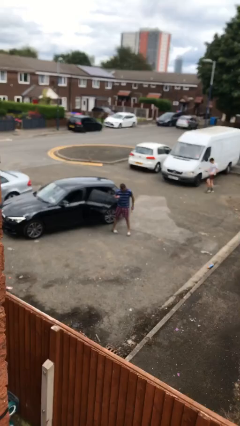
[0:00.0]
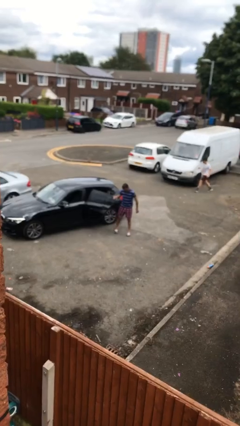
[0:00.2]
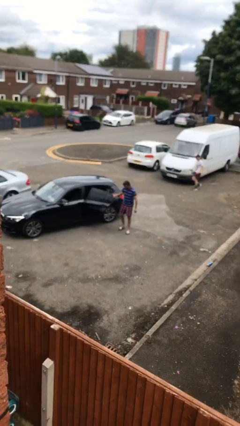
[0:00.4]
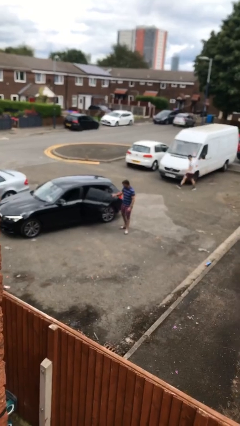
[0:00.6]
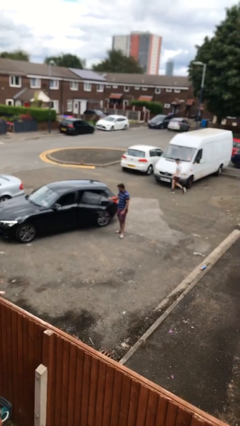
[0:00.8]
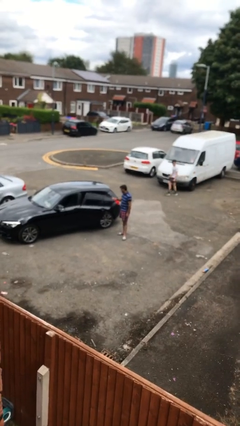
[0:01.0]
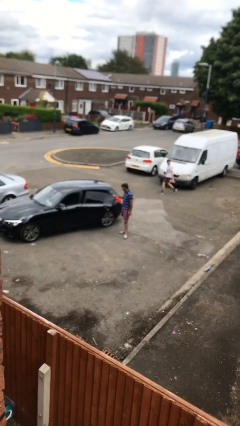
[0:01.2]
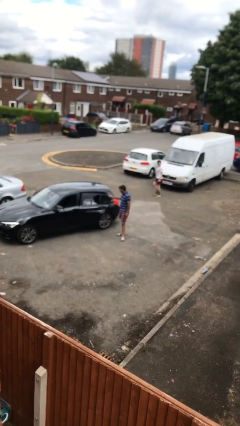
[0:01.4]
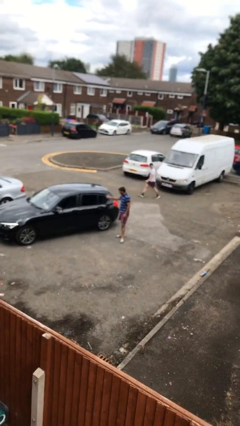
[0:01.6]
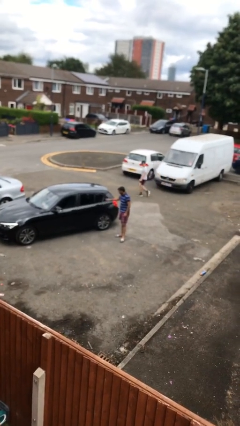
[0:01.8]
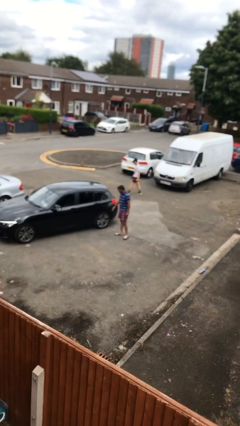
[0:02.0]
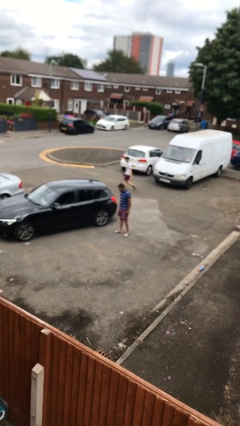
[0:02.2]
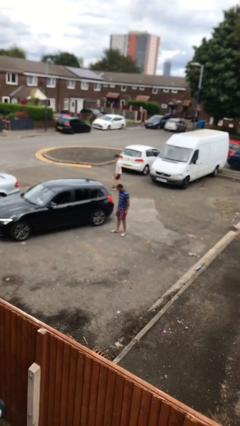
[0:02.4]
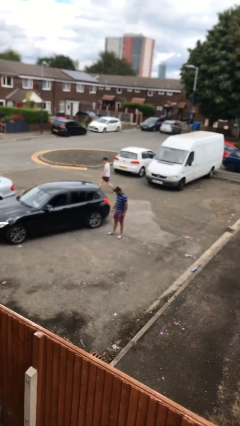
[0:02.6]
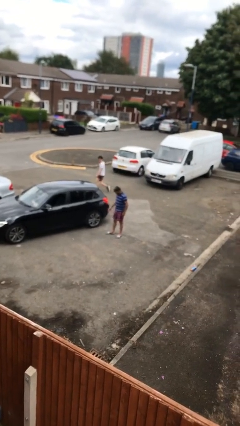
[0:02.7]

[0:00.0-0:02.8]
person closes car door

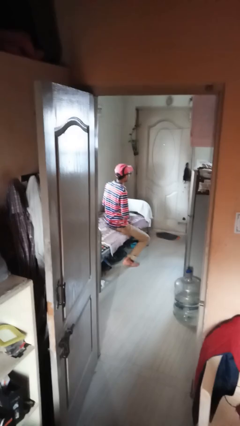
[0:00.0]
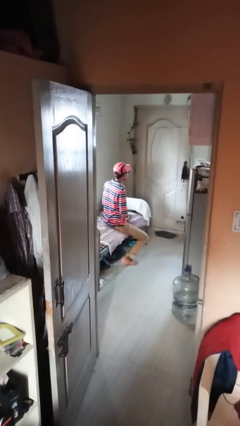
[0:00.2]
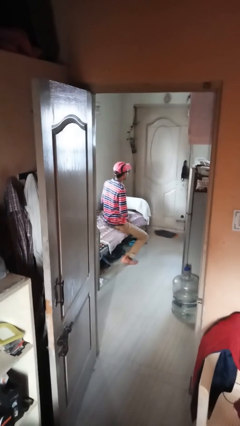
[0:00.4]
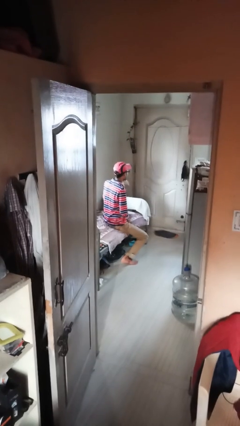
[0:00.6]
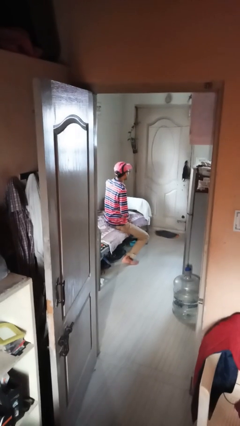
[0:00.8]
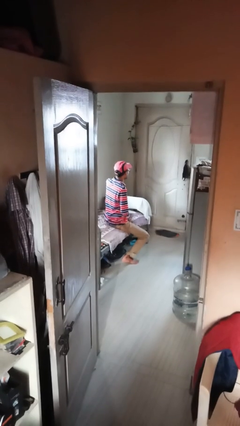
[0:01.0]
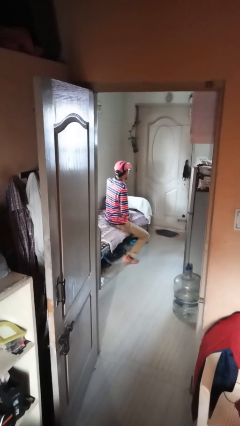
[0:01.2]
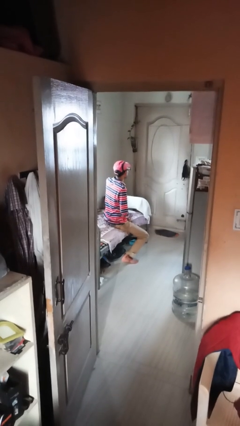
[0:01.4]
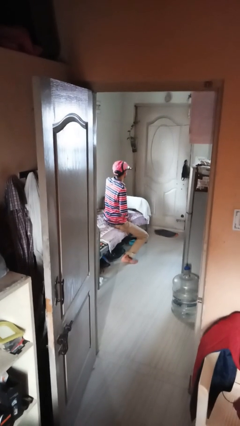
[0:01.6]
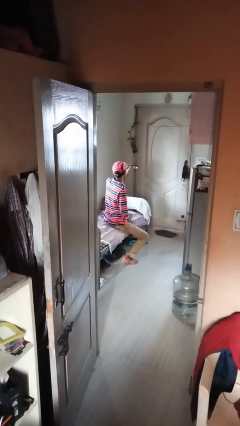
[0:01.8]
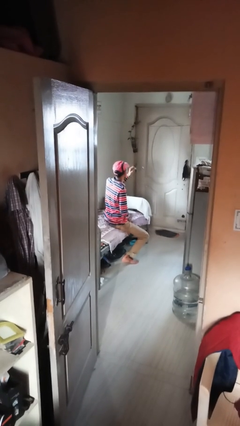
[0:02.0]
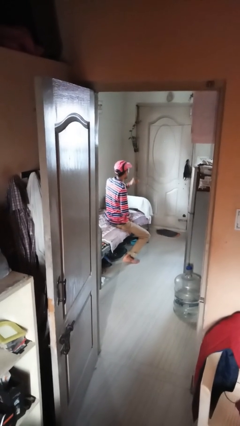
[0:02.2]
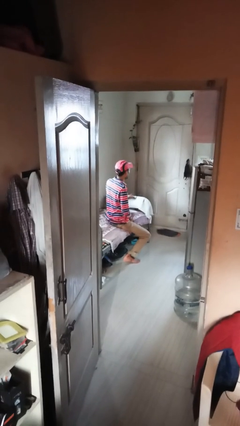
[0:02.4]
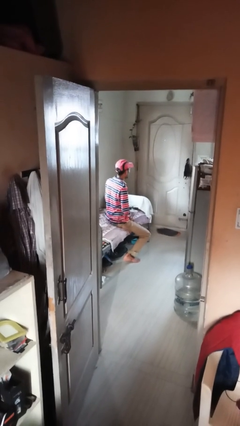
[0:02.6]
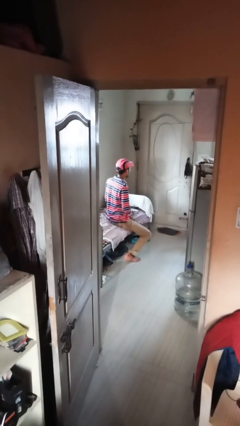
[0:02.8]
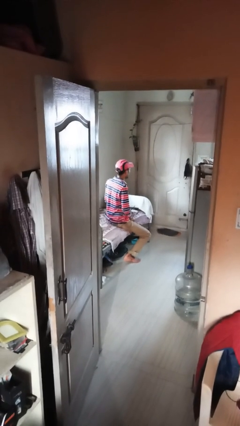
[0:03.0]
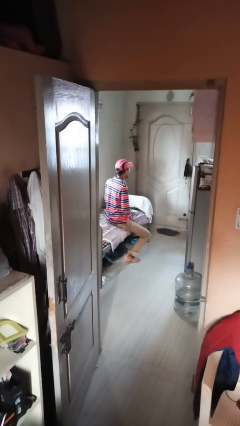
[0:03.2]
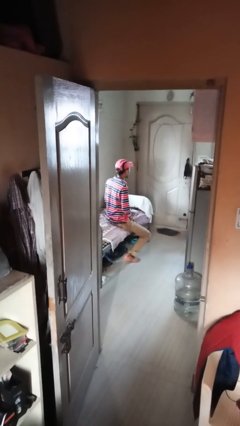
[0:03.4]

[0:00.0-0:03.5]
person takes off glasses

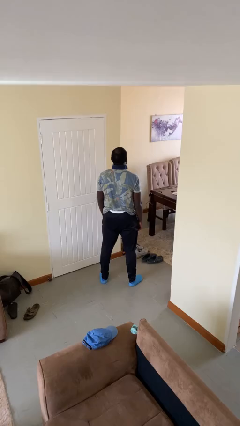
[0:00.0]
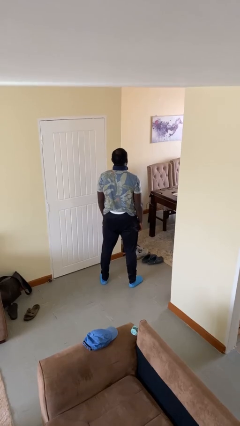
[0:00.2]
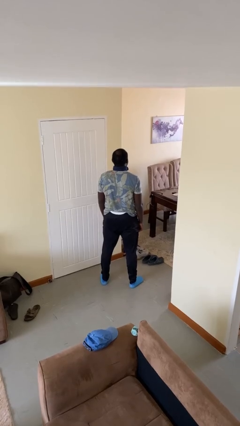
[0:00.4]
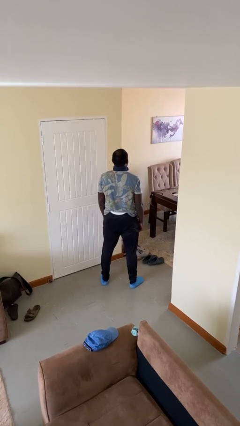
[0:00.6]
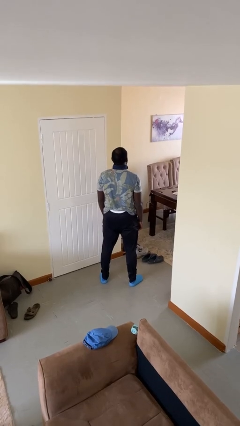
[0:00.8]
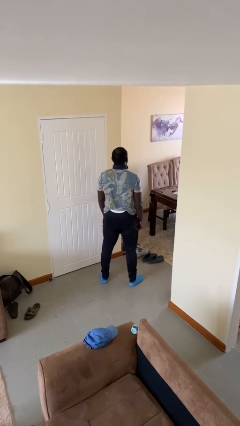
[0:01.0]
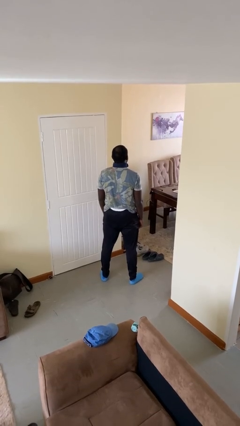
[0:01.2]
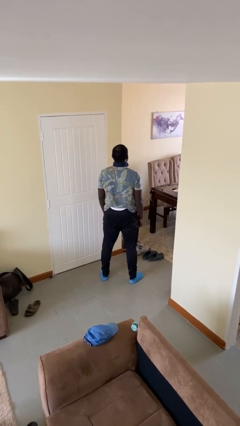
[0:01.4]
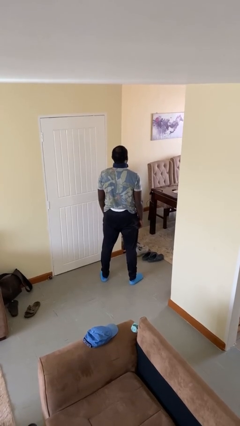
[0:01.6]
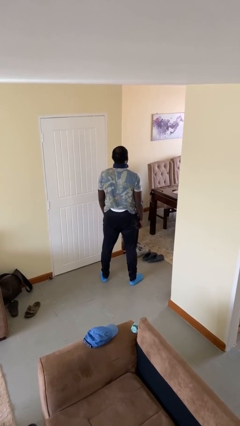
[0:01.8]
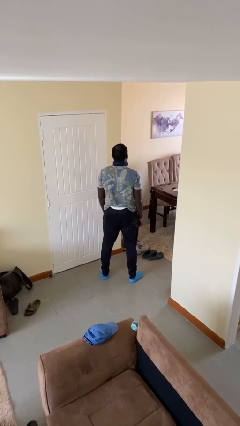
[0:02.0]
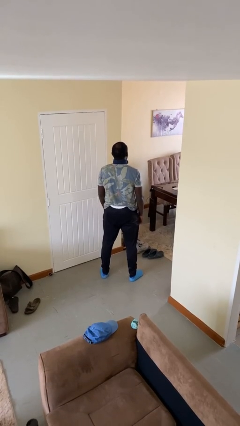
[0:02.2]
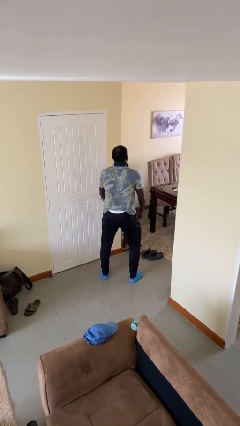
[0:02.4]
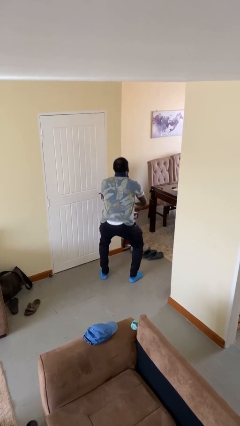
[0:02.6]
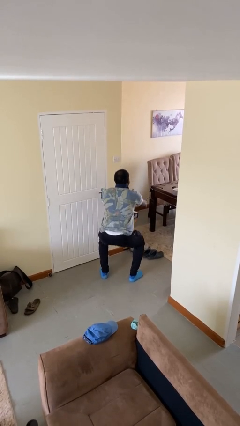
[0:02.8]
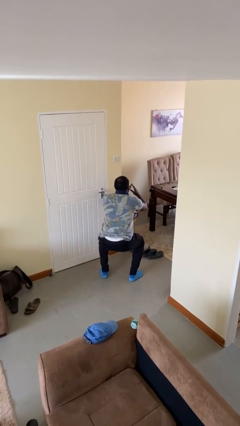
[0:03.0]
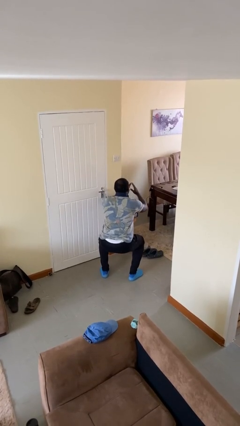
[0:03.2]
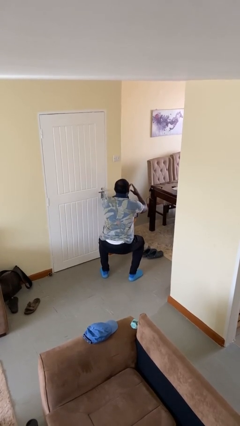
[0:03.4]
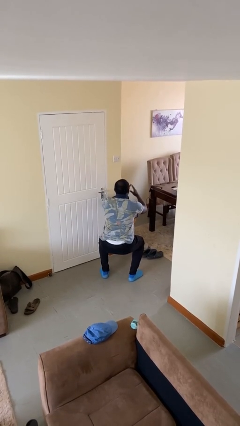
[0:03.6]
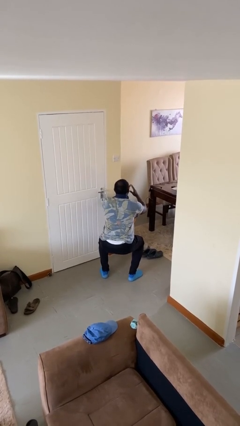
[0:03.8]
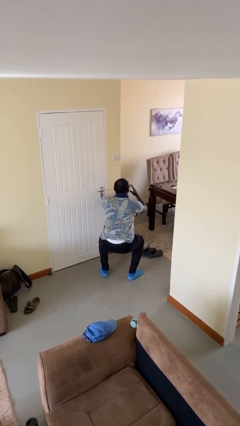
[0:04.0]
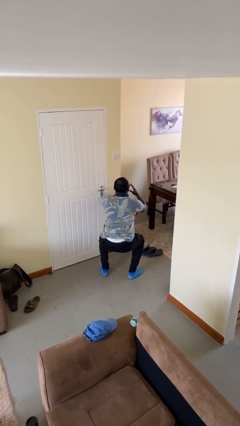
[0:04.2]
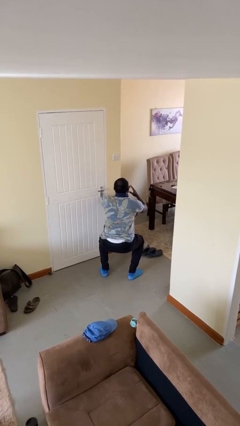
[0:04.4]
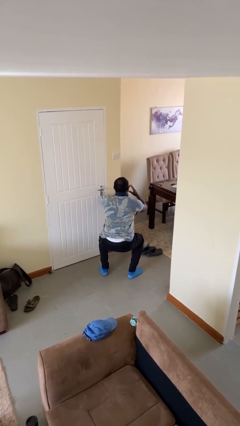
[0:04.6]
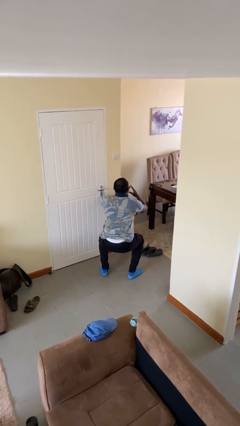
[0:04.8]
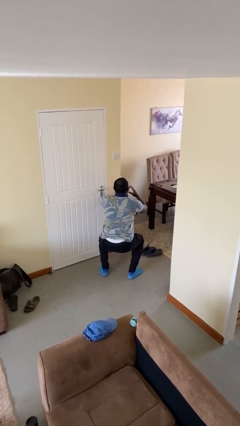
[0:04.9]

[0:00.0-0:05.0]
person squats

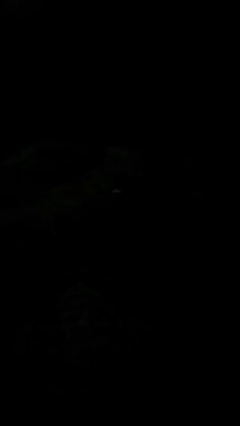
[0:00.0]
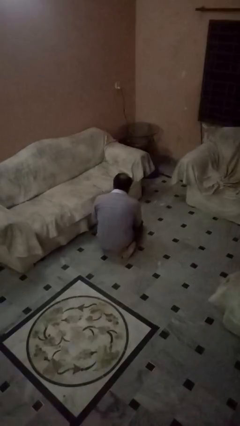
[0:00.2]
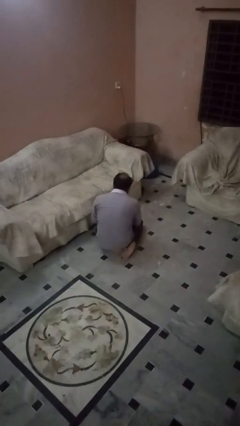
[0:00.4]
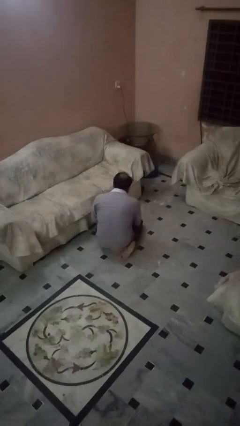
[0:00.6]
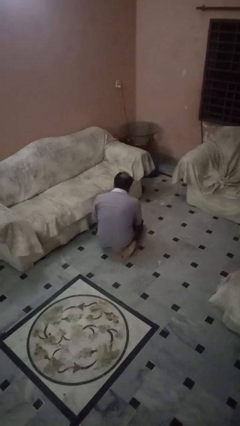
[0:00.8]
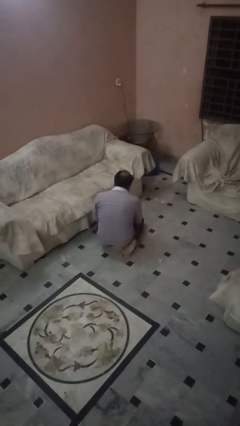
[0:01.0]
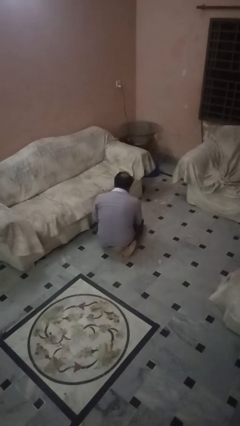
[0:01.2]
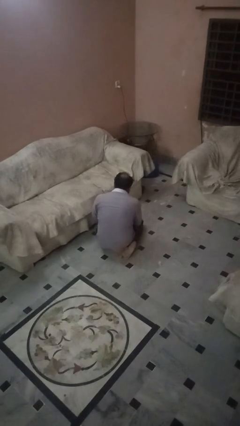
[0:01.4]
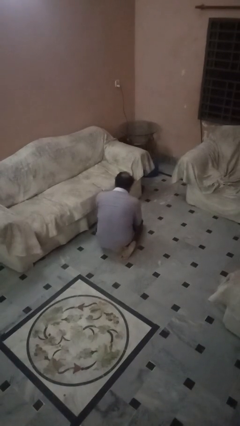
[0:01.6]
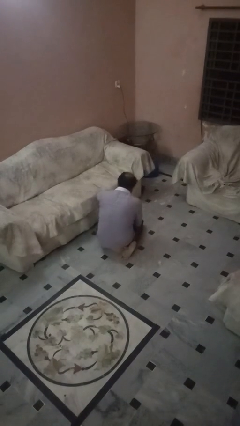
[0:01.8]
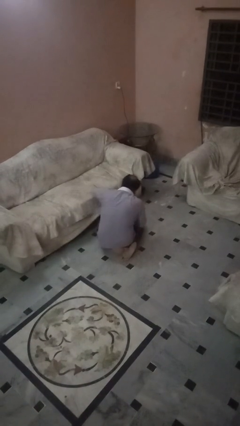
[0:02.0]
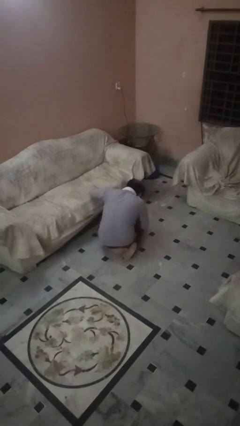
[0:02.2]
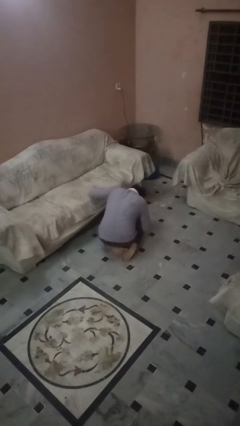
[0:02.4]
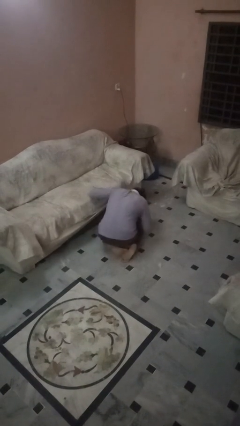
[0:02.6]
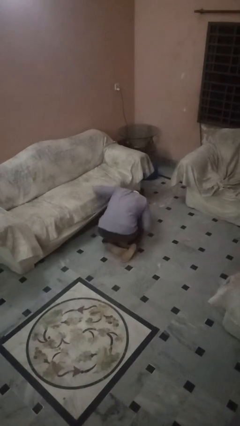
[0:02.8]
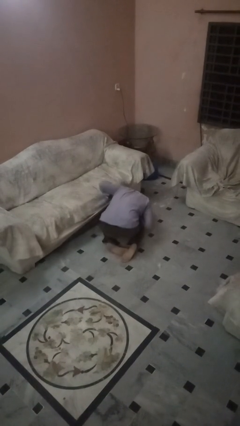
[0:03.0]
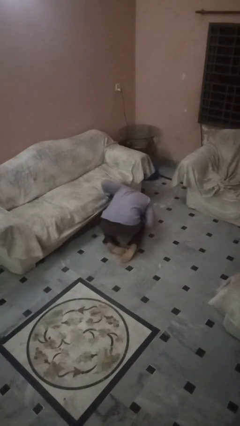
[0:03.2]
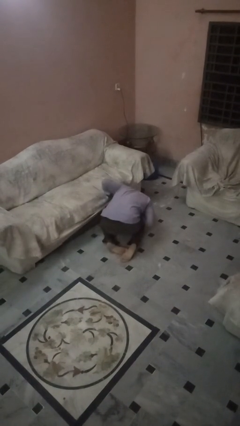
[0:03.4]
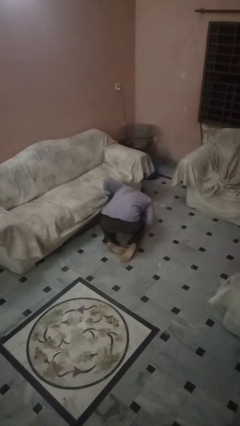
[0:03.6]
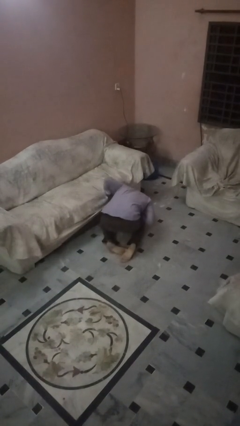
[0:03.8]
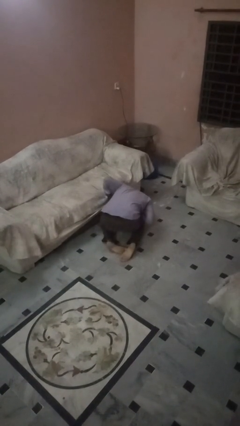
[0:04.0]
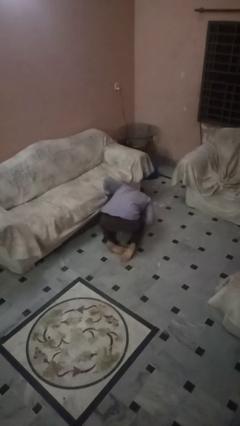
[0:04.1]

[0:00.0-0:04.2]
person searches under couch

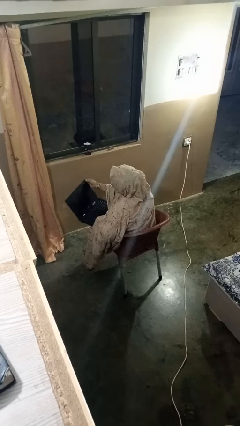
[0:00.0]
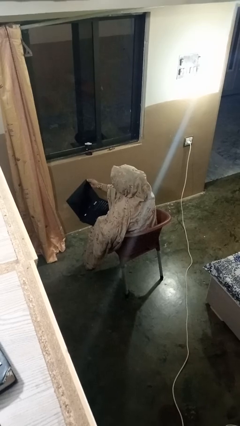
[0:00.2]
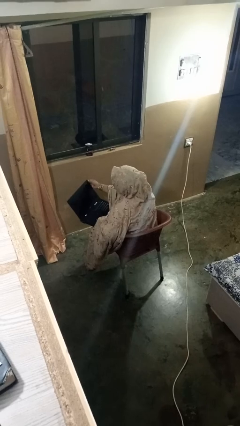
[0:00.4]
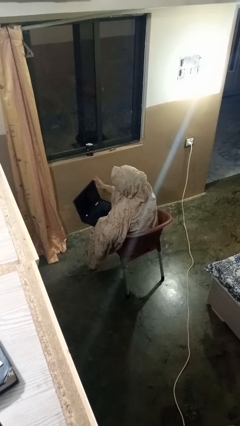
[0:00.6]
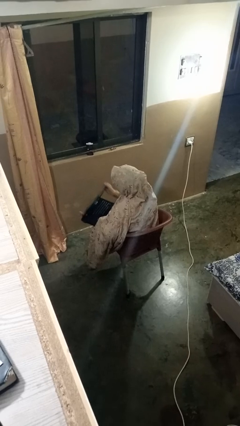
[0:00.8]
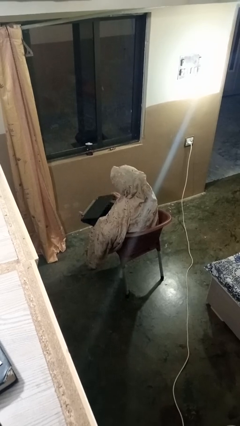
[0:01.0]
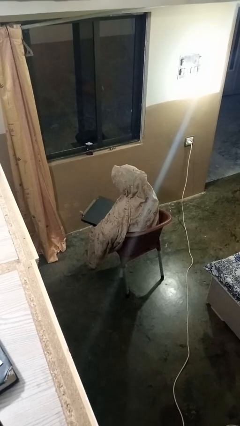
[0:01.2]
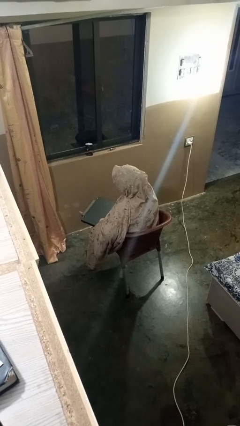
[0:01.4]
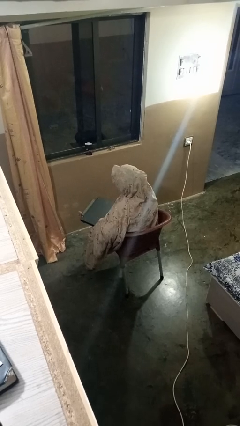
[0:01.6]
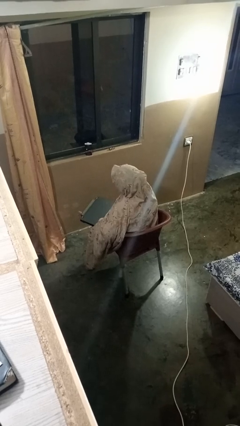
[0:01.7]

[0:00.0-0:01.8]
person closes laptop

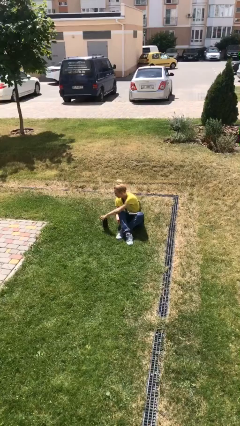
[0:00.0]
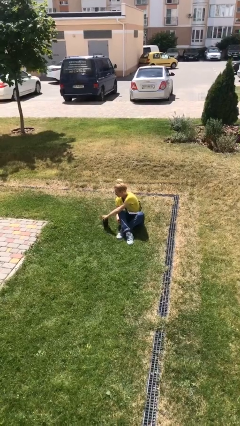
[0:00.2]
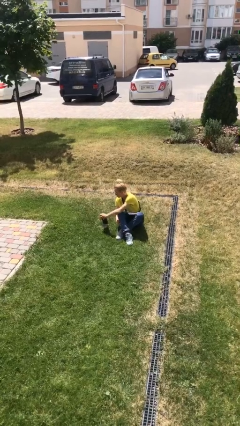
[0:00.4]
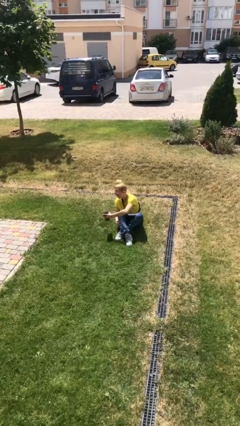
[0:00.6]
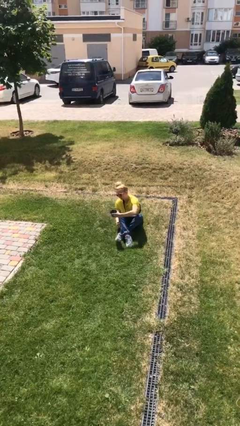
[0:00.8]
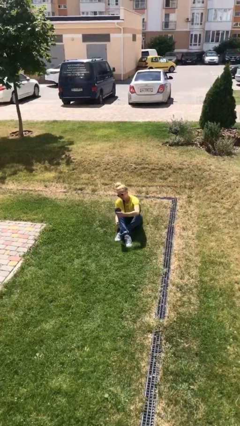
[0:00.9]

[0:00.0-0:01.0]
person picks up object from floor
